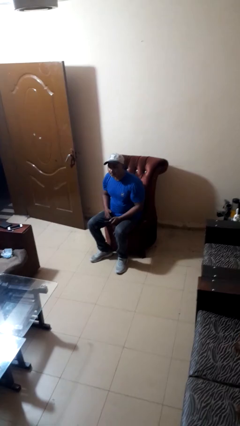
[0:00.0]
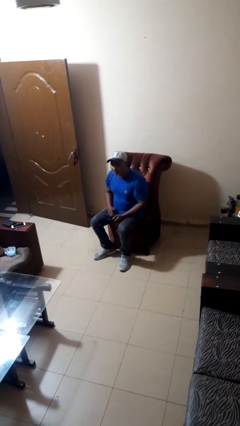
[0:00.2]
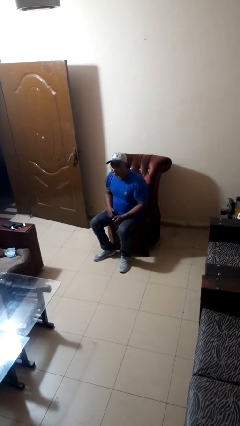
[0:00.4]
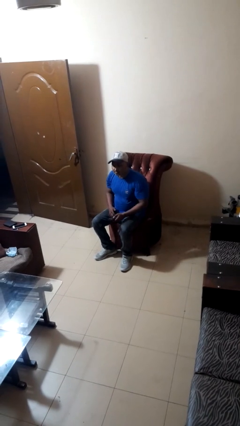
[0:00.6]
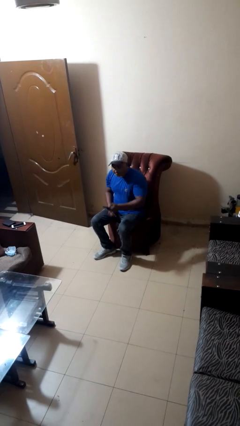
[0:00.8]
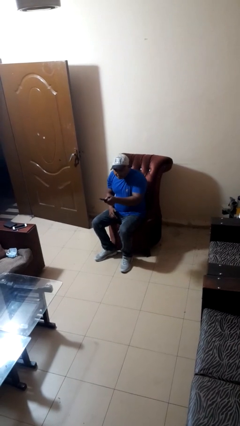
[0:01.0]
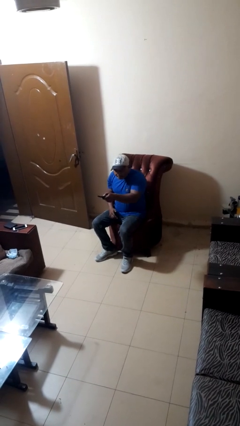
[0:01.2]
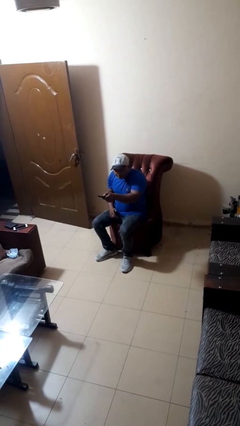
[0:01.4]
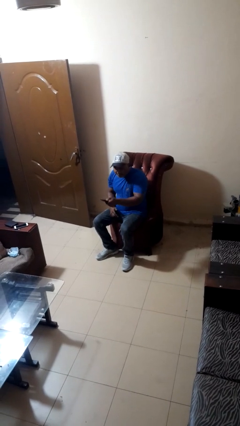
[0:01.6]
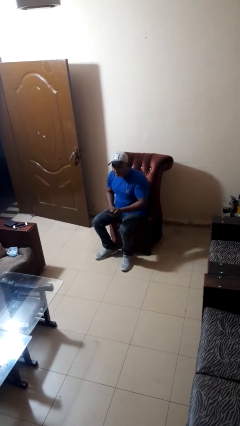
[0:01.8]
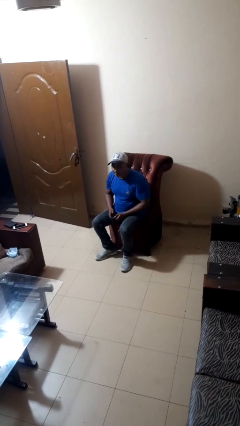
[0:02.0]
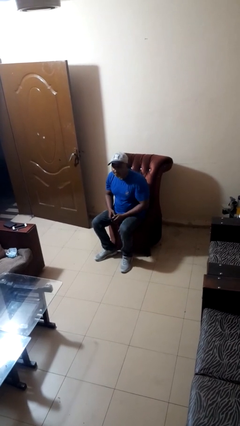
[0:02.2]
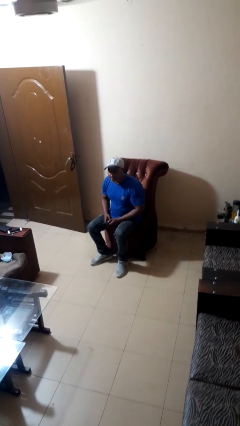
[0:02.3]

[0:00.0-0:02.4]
person uses television remote

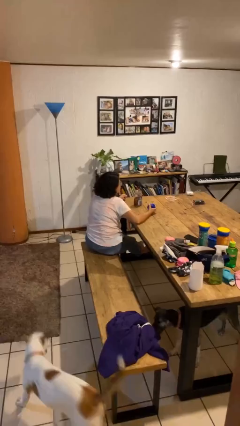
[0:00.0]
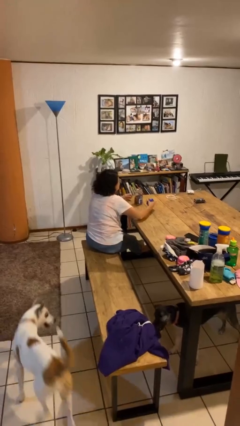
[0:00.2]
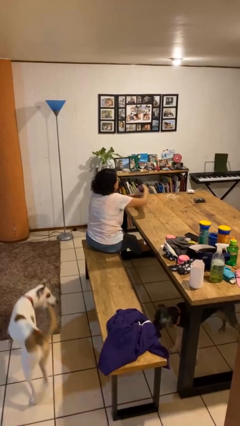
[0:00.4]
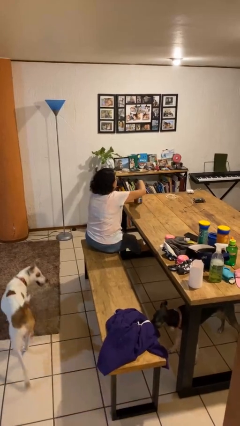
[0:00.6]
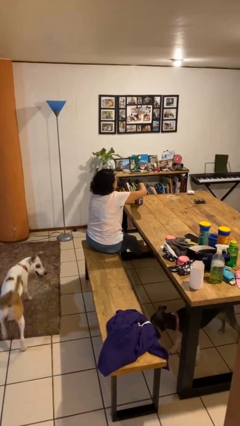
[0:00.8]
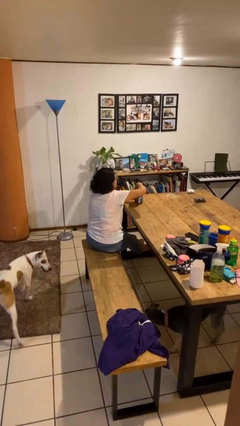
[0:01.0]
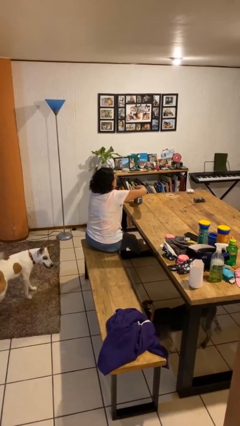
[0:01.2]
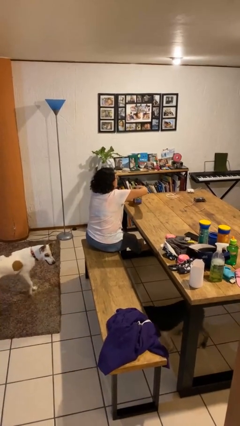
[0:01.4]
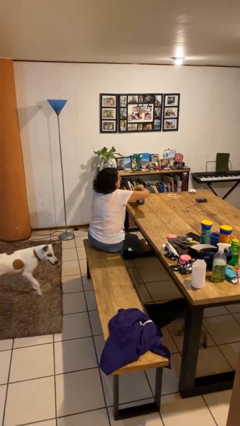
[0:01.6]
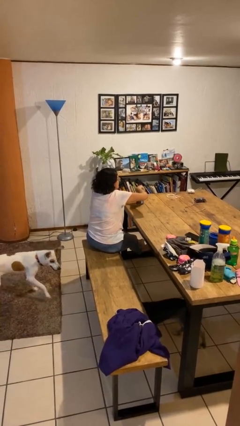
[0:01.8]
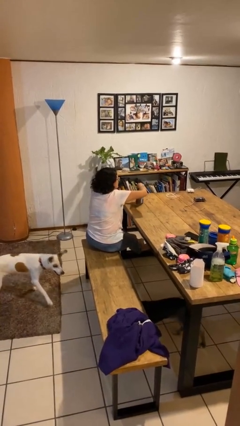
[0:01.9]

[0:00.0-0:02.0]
person closes jar

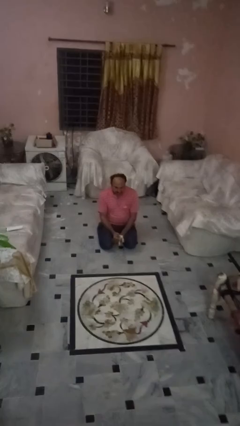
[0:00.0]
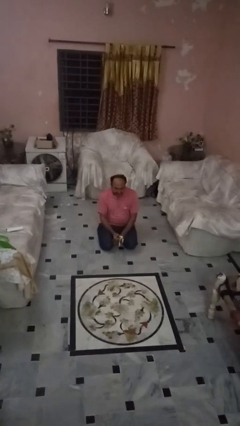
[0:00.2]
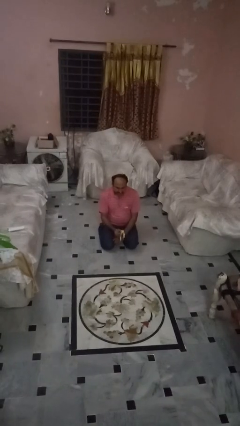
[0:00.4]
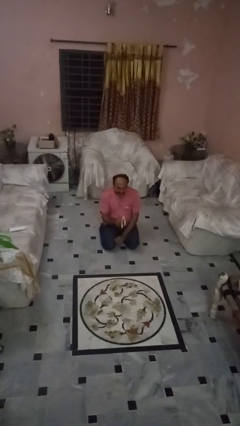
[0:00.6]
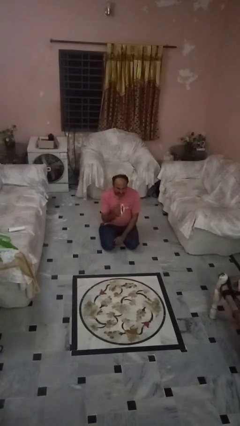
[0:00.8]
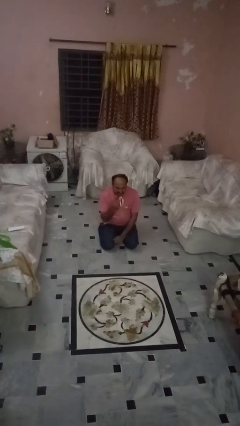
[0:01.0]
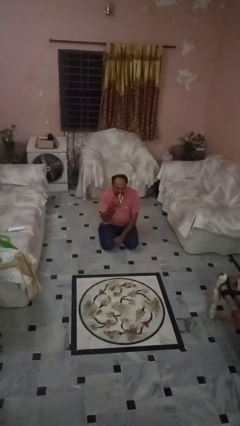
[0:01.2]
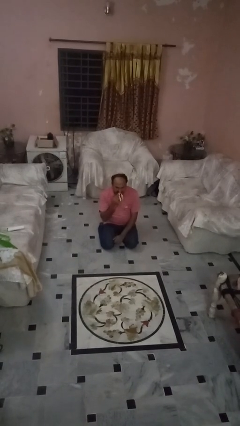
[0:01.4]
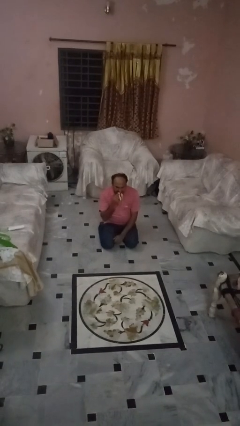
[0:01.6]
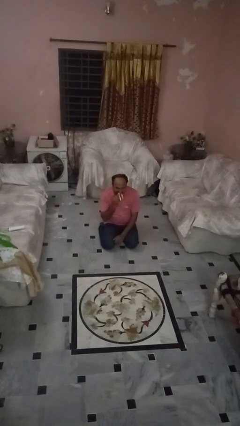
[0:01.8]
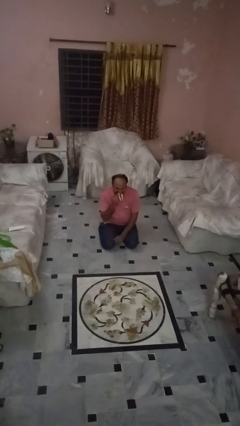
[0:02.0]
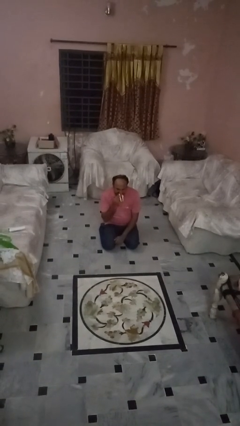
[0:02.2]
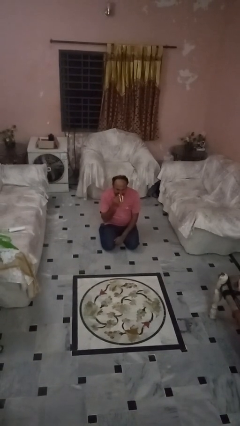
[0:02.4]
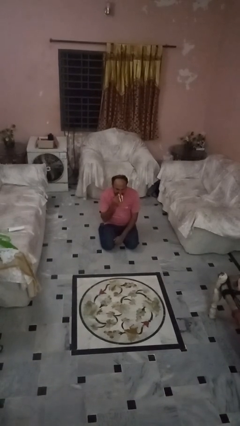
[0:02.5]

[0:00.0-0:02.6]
person eats banana

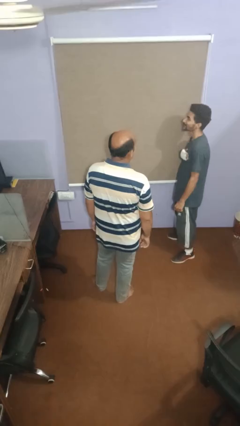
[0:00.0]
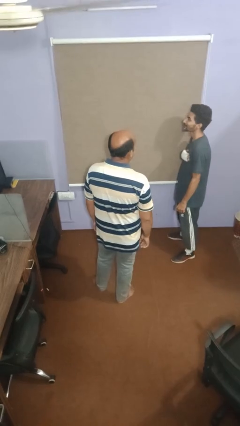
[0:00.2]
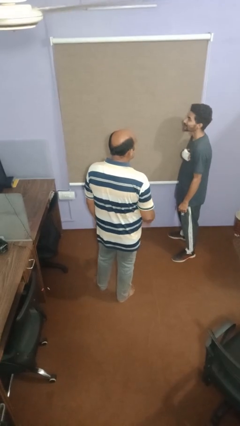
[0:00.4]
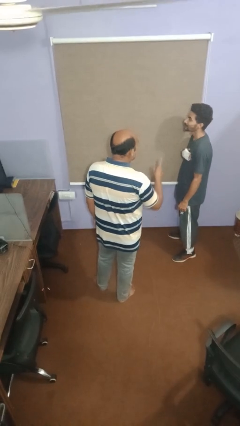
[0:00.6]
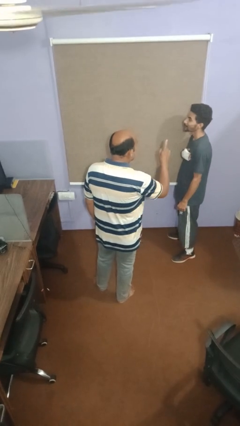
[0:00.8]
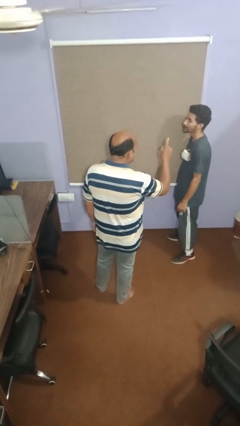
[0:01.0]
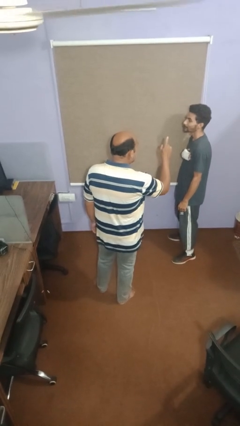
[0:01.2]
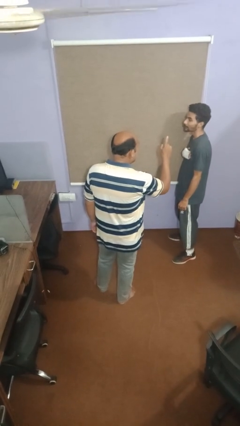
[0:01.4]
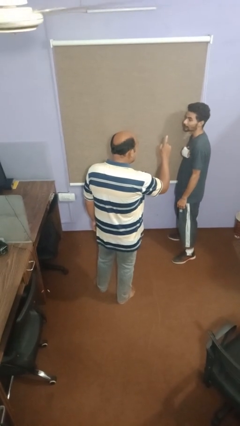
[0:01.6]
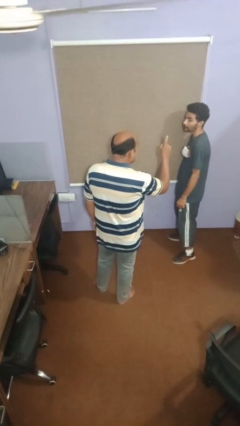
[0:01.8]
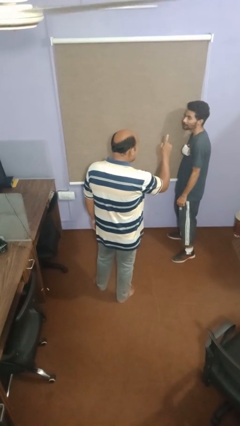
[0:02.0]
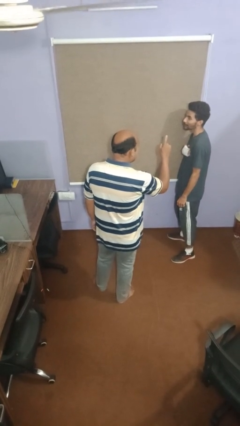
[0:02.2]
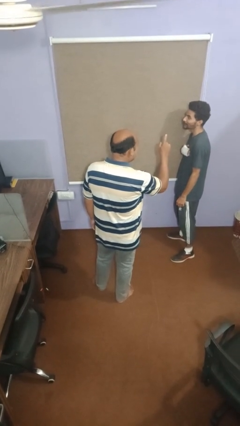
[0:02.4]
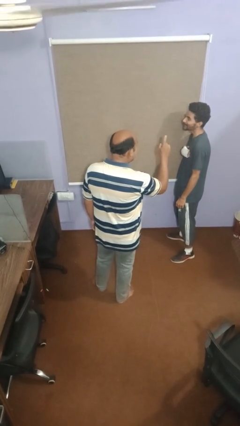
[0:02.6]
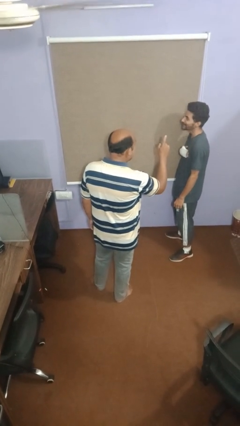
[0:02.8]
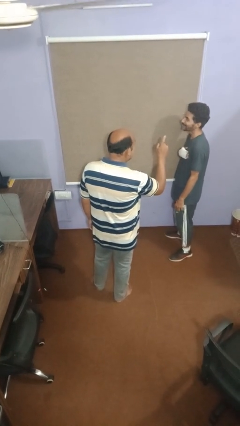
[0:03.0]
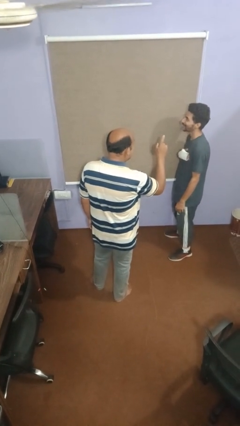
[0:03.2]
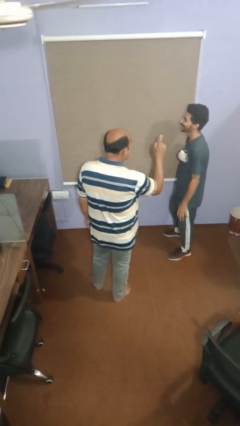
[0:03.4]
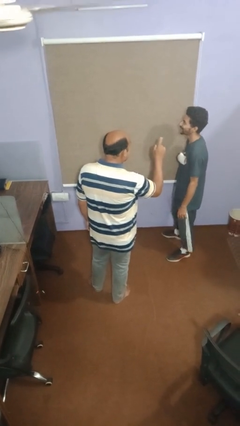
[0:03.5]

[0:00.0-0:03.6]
person points at person

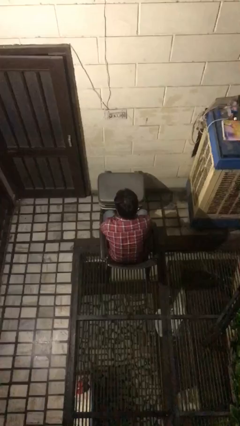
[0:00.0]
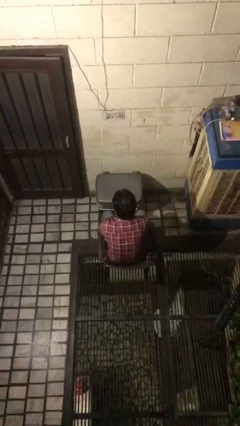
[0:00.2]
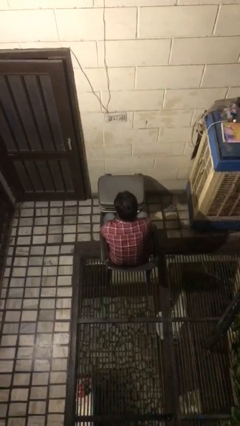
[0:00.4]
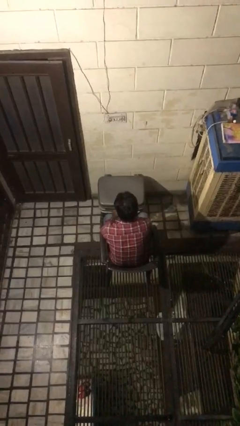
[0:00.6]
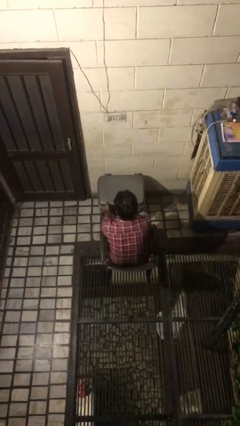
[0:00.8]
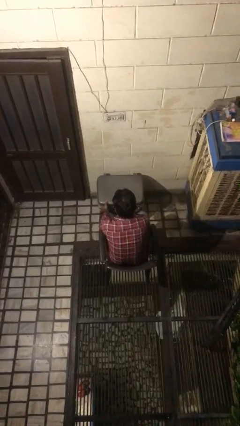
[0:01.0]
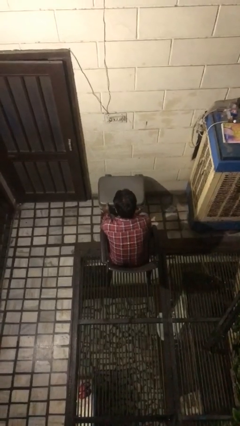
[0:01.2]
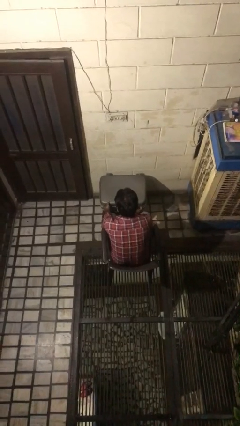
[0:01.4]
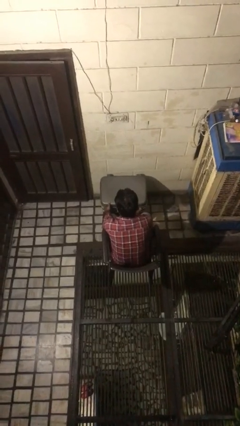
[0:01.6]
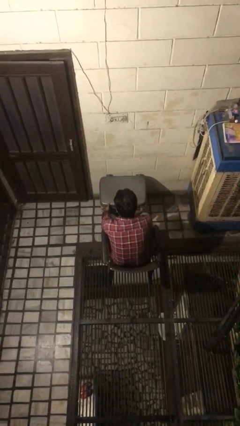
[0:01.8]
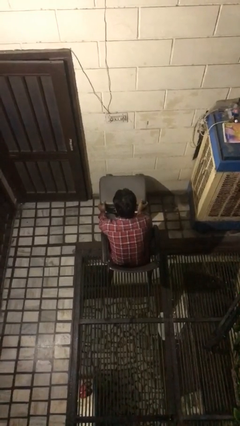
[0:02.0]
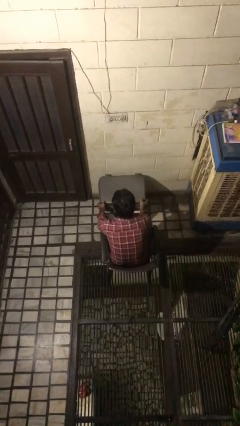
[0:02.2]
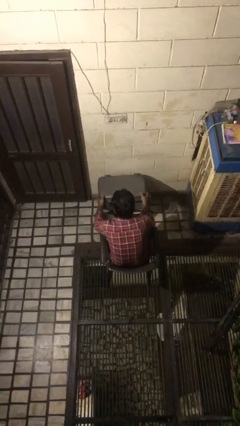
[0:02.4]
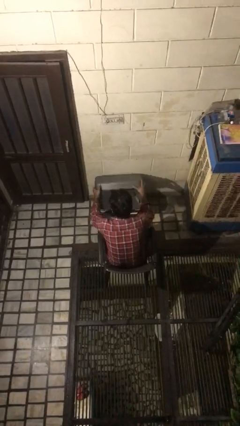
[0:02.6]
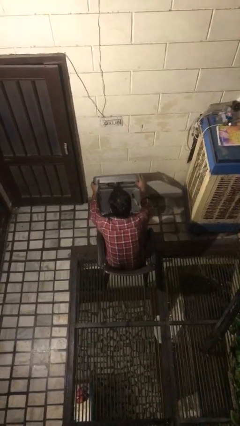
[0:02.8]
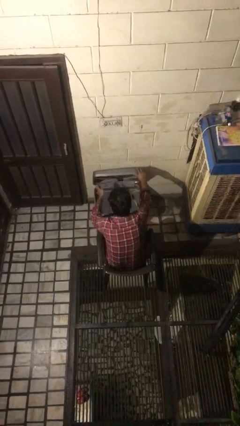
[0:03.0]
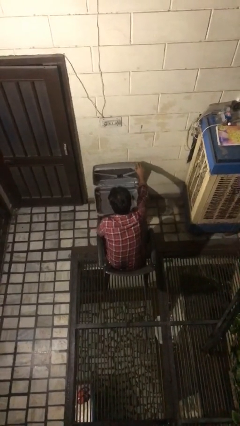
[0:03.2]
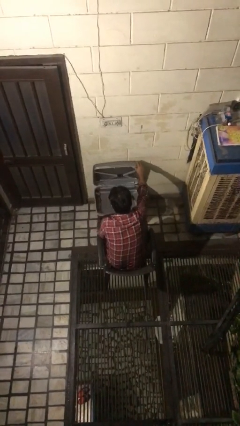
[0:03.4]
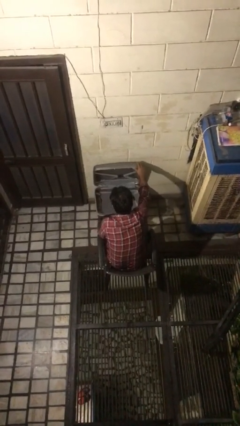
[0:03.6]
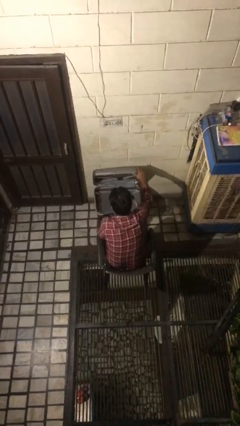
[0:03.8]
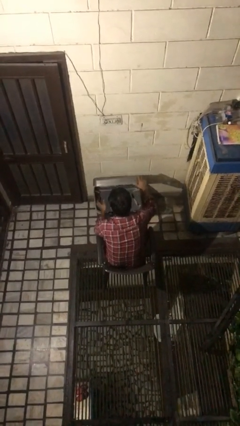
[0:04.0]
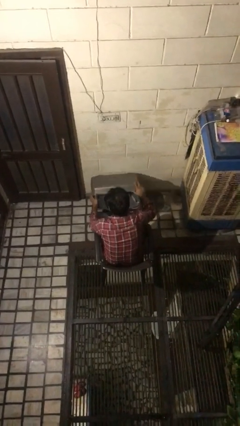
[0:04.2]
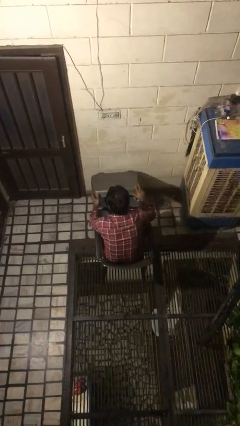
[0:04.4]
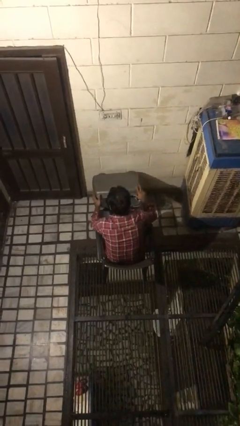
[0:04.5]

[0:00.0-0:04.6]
person opens suitcase

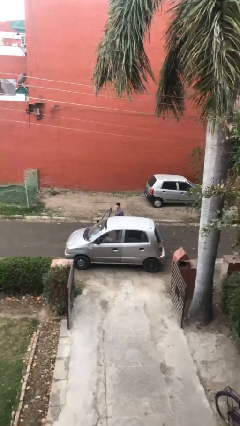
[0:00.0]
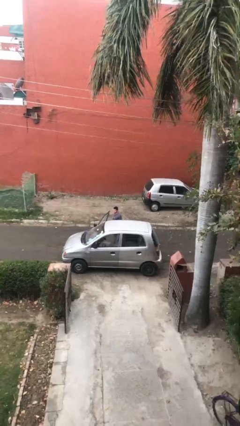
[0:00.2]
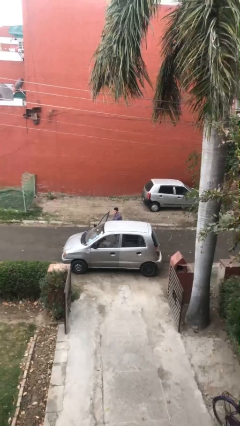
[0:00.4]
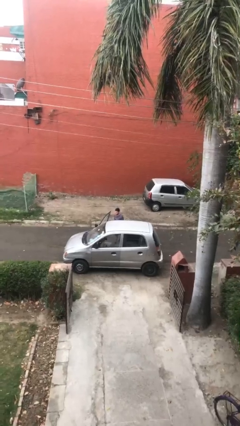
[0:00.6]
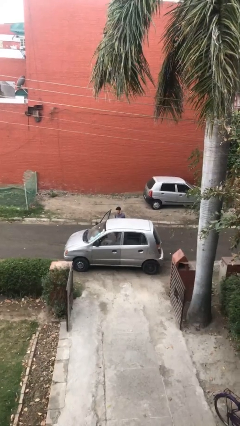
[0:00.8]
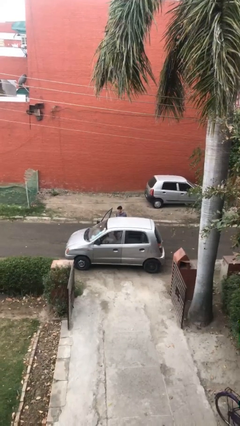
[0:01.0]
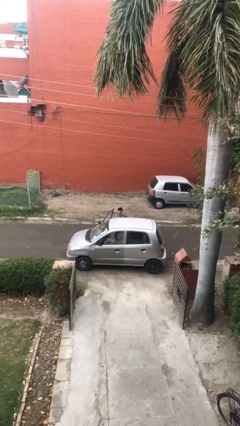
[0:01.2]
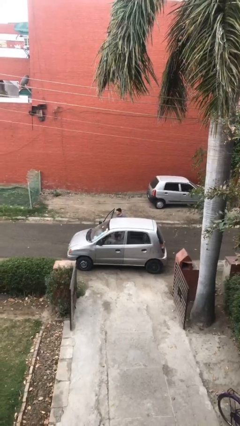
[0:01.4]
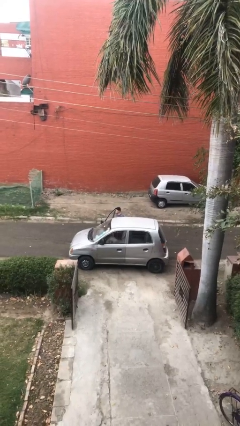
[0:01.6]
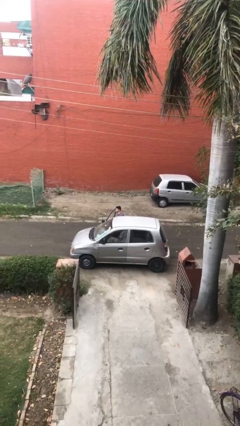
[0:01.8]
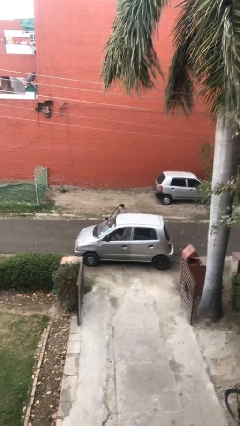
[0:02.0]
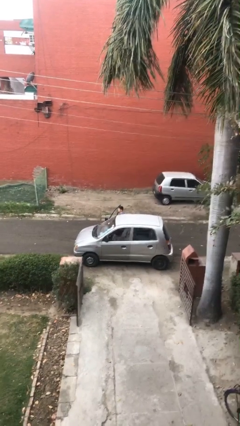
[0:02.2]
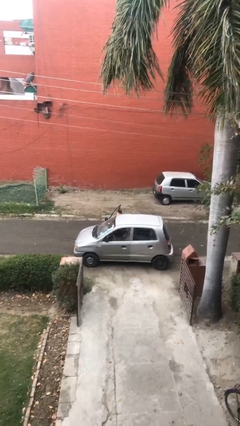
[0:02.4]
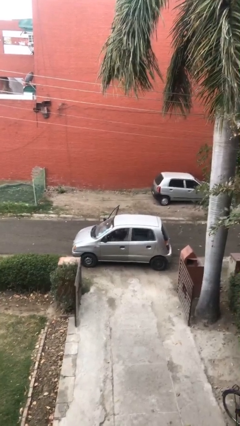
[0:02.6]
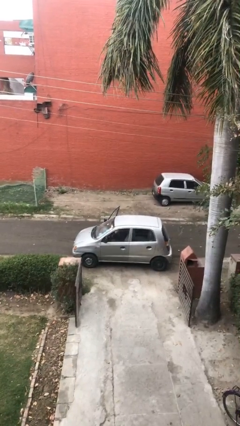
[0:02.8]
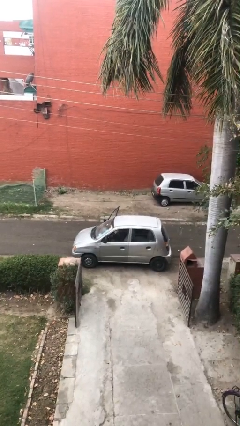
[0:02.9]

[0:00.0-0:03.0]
person enters car
